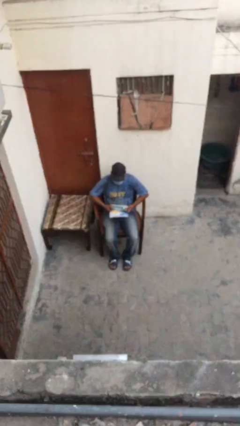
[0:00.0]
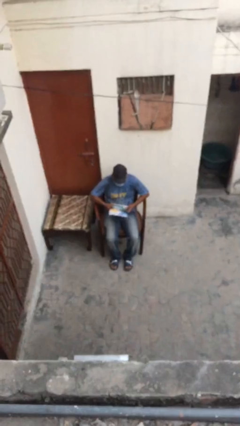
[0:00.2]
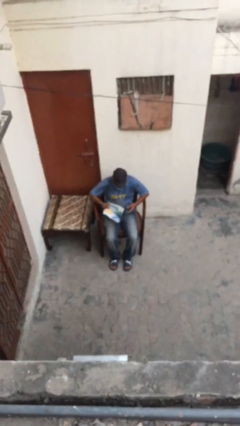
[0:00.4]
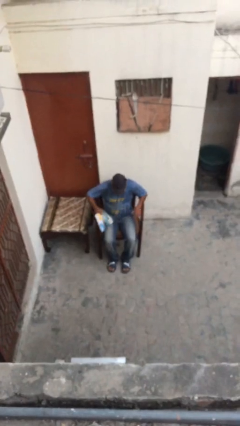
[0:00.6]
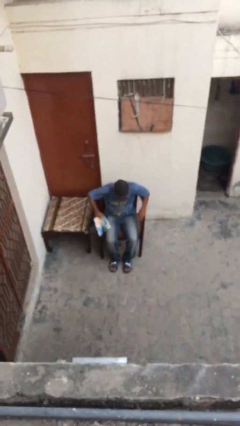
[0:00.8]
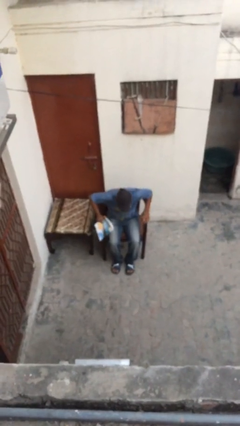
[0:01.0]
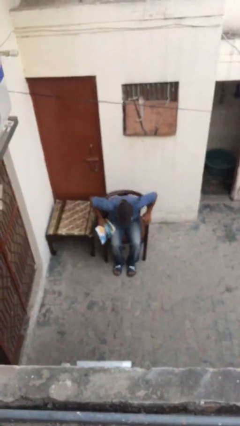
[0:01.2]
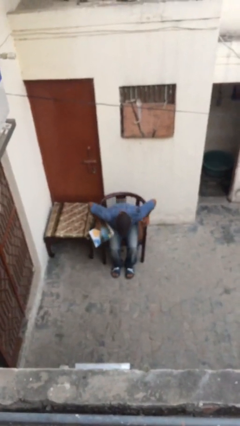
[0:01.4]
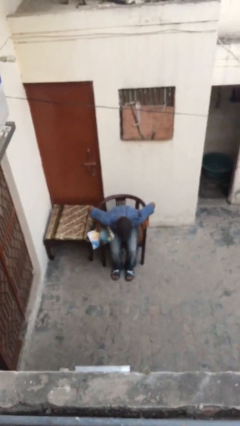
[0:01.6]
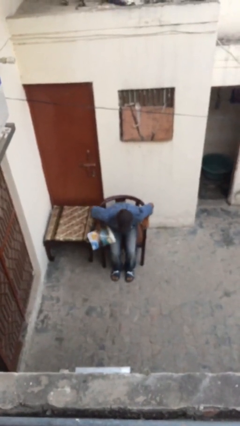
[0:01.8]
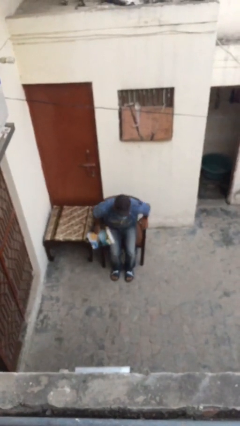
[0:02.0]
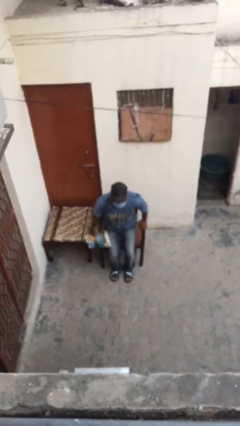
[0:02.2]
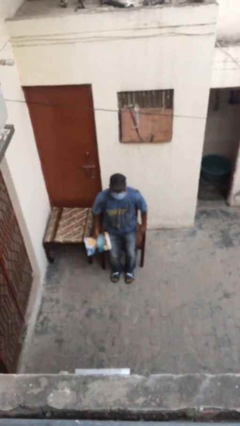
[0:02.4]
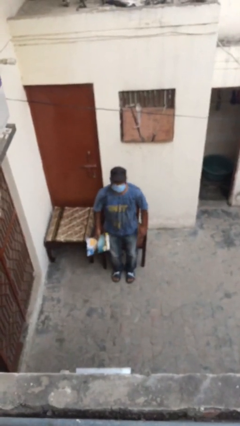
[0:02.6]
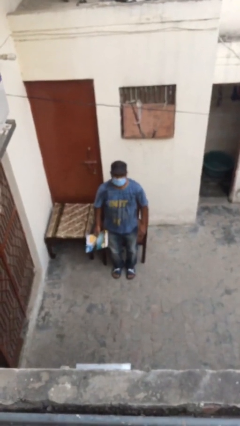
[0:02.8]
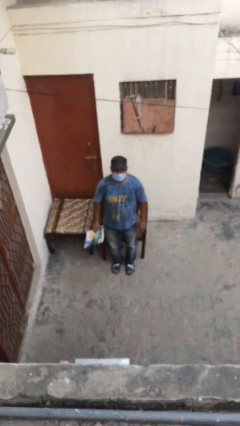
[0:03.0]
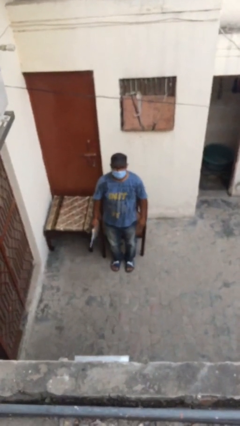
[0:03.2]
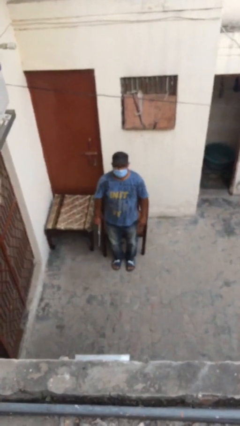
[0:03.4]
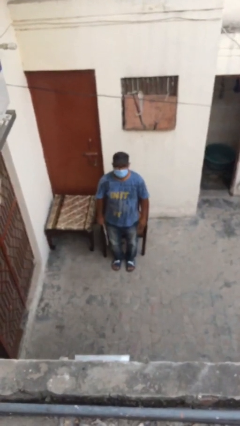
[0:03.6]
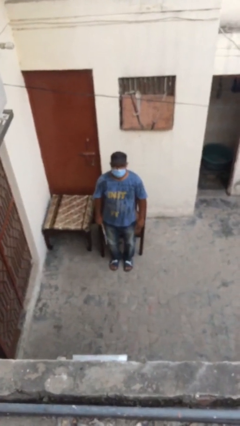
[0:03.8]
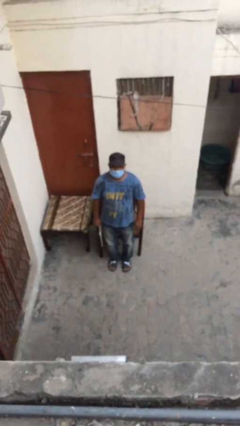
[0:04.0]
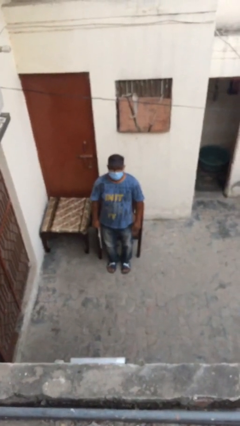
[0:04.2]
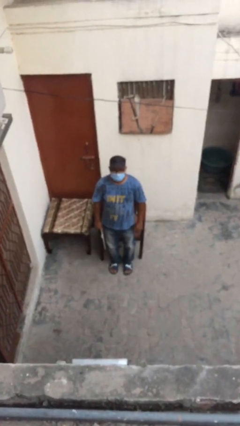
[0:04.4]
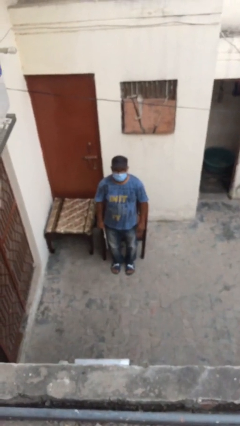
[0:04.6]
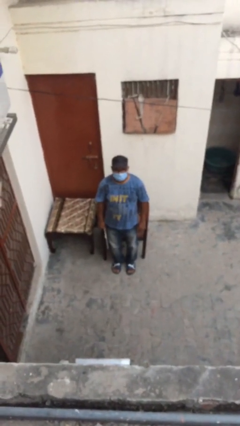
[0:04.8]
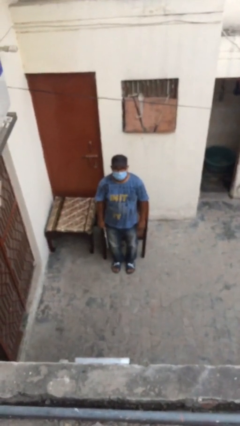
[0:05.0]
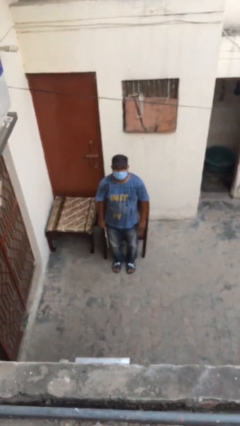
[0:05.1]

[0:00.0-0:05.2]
person stands up

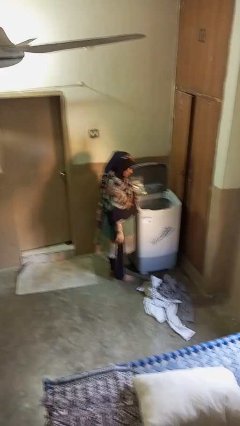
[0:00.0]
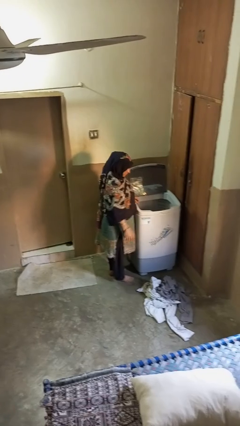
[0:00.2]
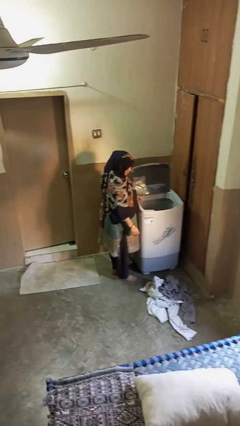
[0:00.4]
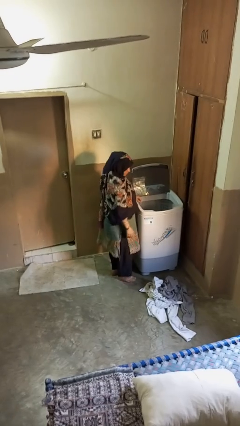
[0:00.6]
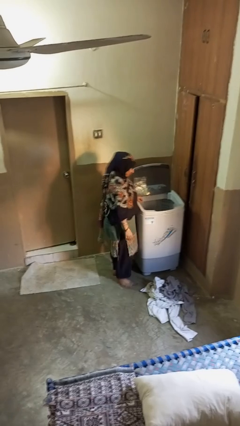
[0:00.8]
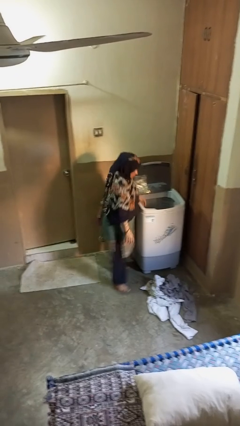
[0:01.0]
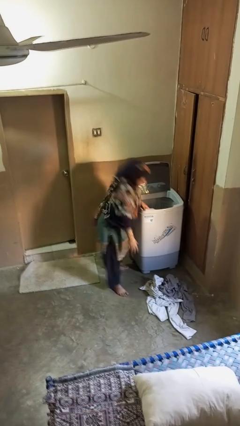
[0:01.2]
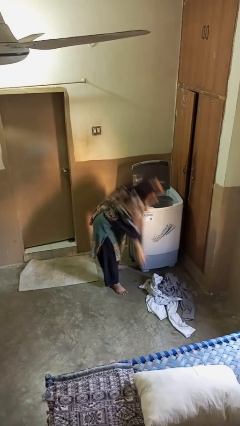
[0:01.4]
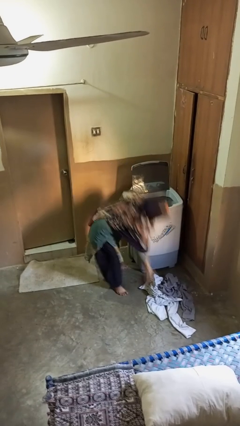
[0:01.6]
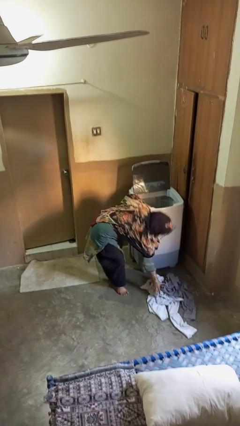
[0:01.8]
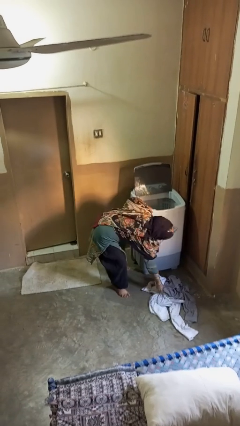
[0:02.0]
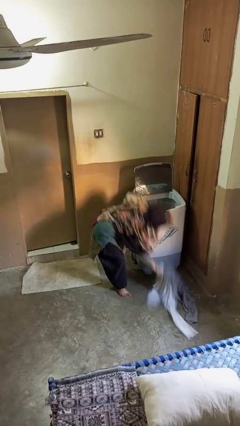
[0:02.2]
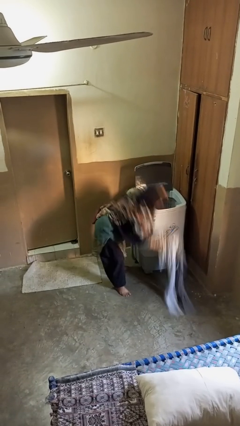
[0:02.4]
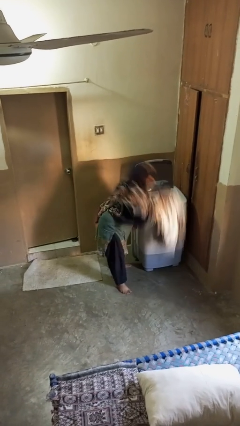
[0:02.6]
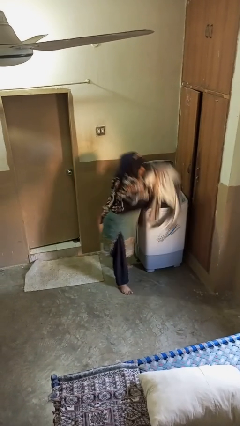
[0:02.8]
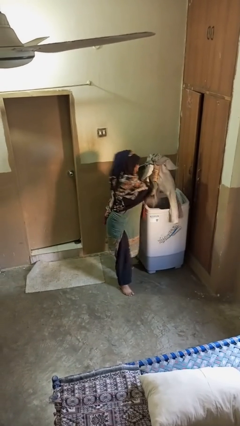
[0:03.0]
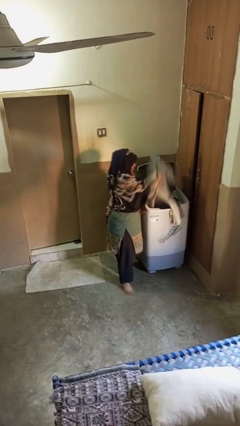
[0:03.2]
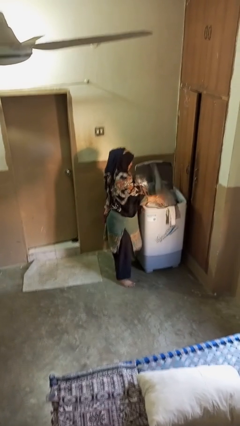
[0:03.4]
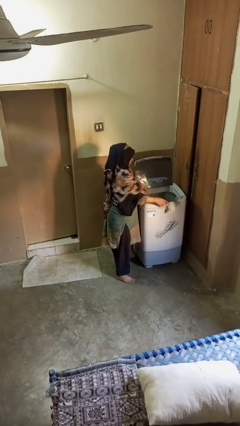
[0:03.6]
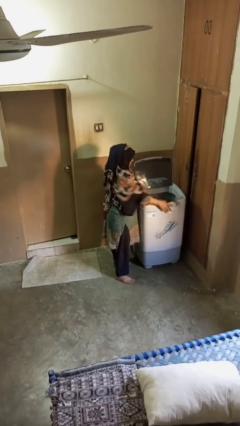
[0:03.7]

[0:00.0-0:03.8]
person loads clotheswasher

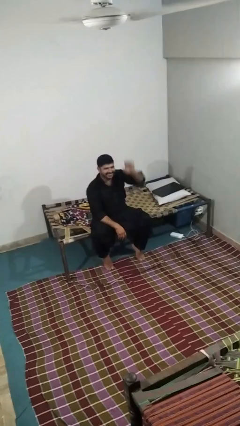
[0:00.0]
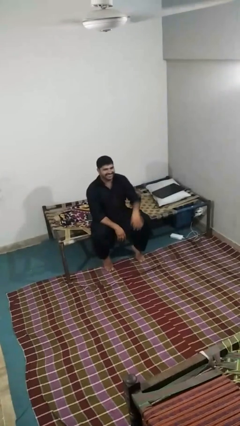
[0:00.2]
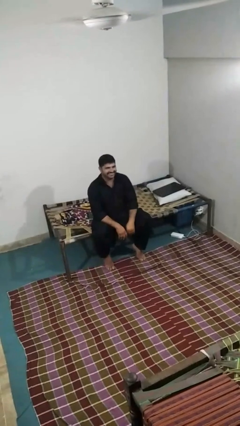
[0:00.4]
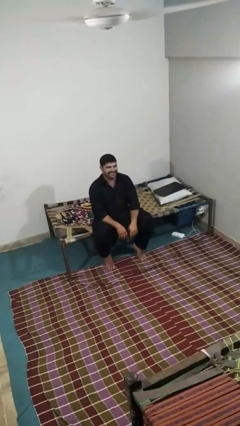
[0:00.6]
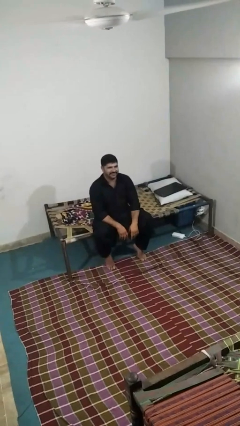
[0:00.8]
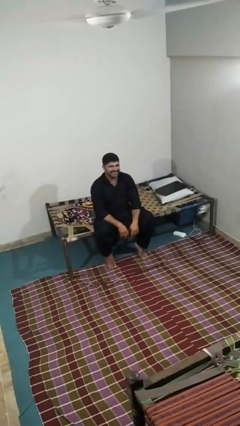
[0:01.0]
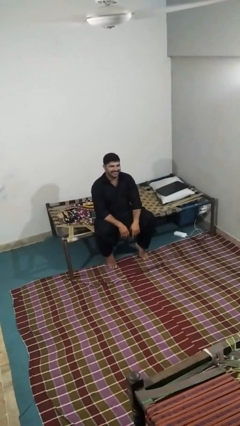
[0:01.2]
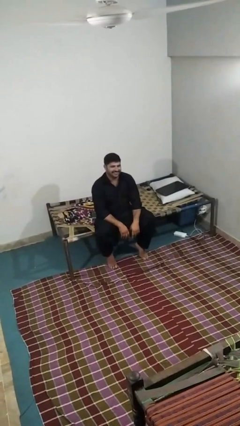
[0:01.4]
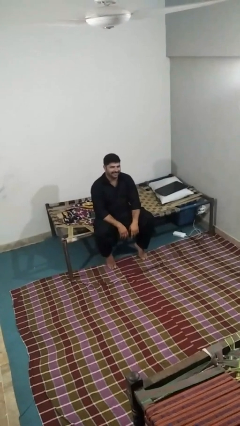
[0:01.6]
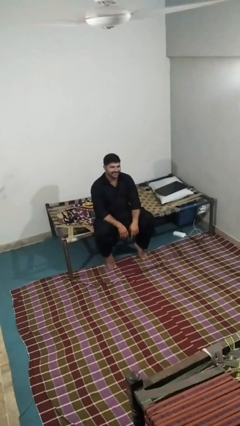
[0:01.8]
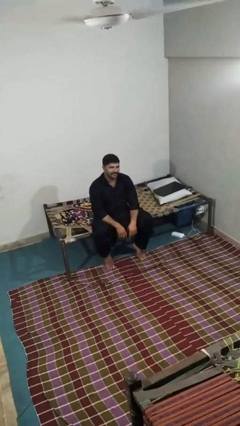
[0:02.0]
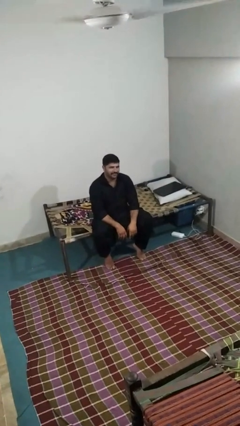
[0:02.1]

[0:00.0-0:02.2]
person gestures lower hand

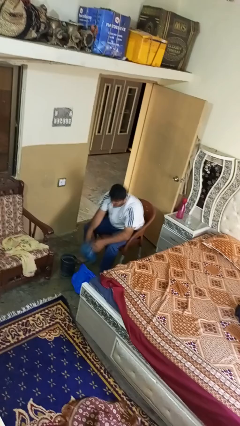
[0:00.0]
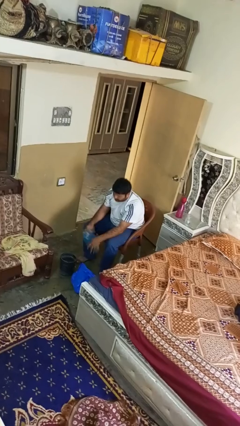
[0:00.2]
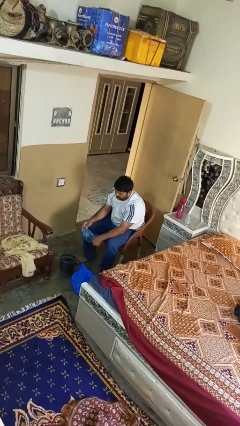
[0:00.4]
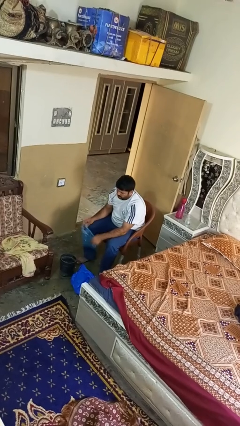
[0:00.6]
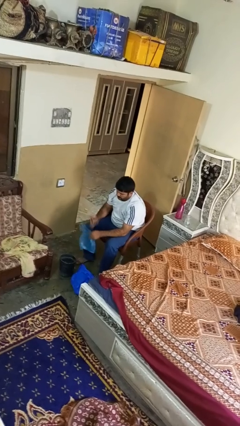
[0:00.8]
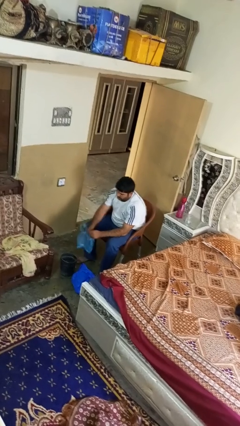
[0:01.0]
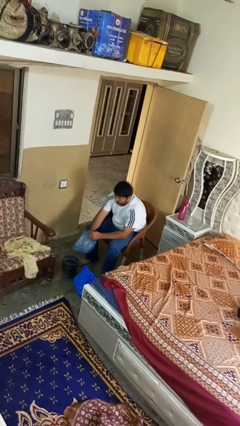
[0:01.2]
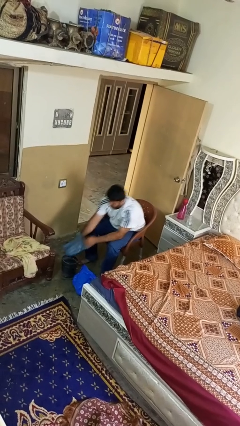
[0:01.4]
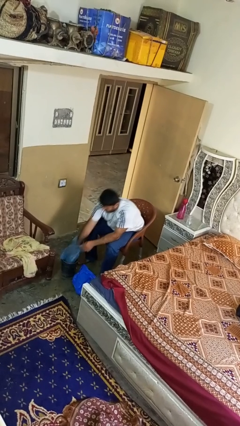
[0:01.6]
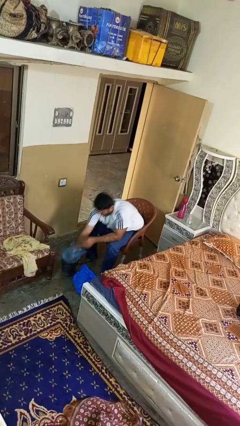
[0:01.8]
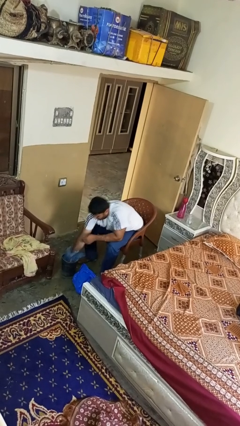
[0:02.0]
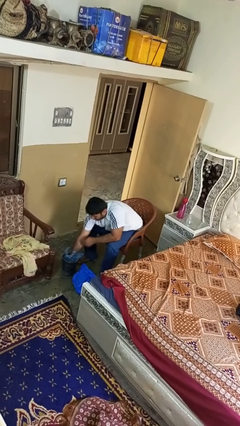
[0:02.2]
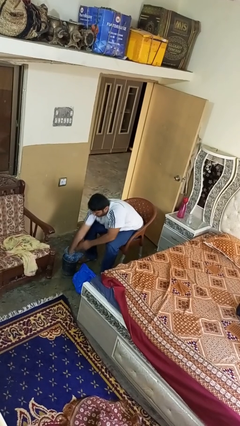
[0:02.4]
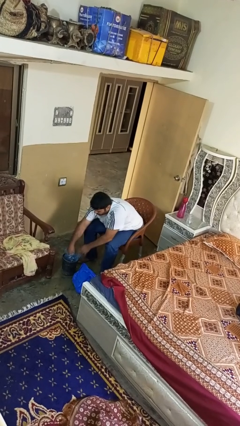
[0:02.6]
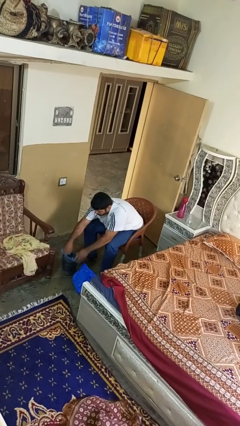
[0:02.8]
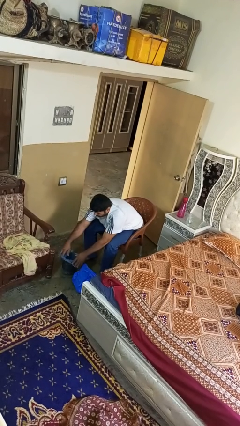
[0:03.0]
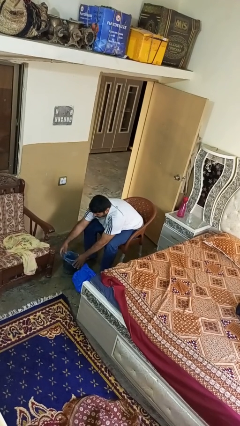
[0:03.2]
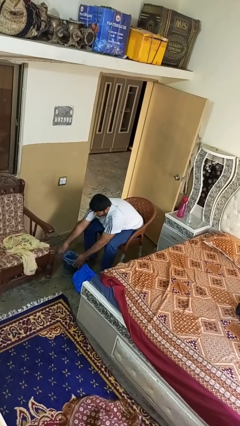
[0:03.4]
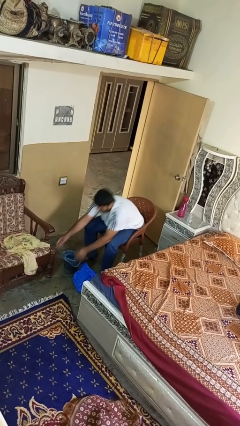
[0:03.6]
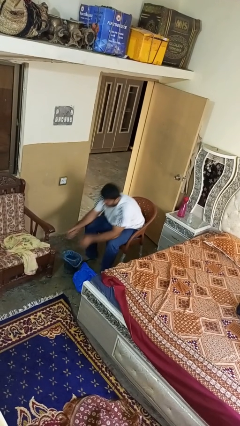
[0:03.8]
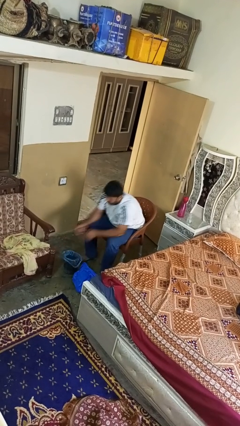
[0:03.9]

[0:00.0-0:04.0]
person inserts trashbag into trashcan

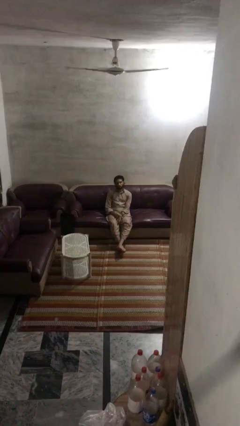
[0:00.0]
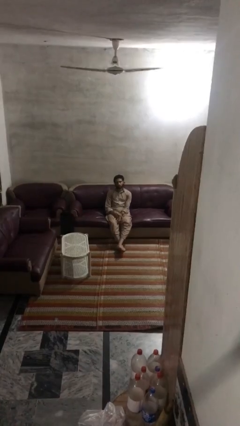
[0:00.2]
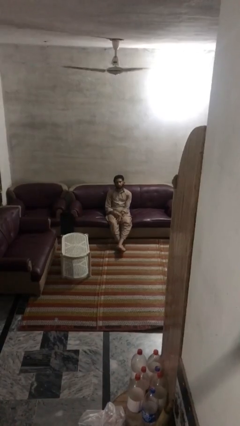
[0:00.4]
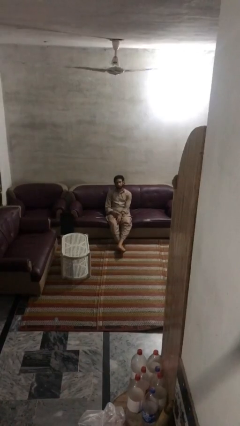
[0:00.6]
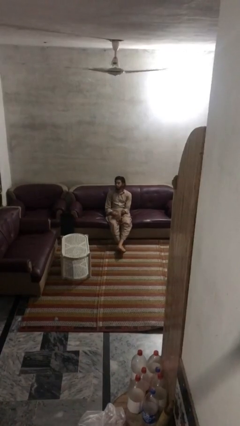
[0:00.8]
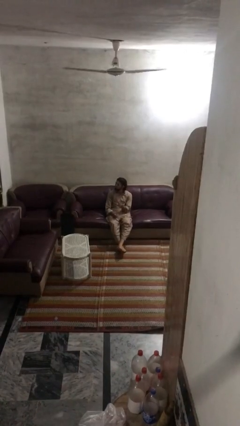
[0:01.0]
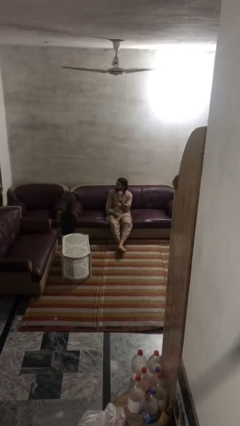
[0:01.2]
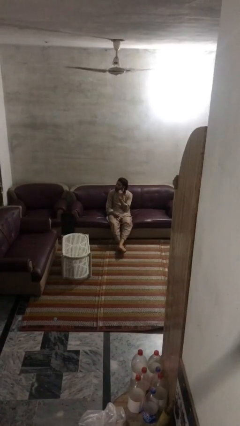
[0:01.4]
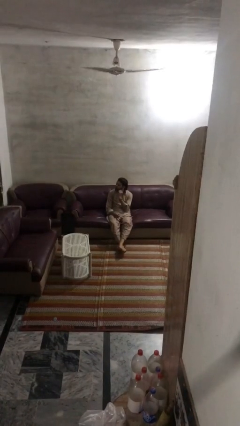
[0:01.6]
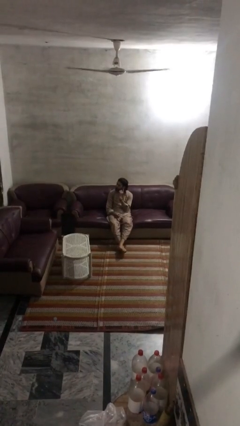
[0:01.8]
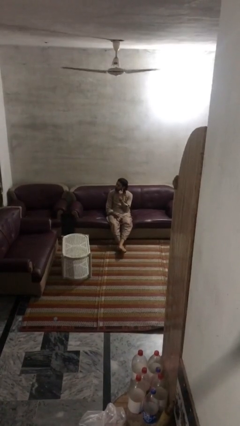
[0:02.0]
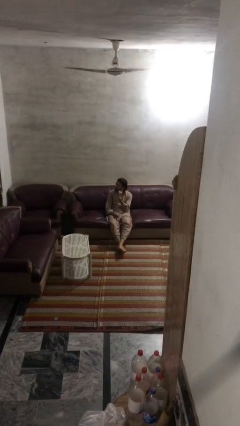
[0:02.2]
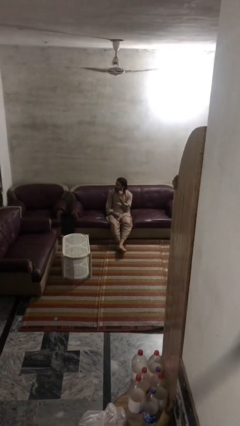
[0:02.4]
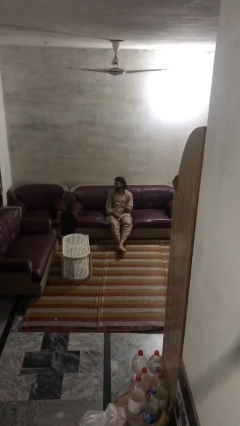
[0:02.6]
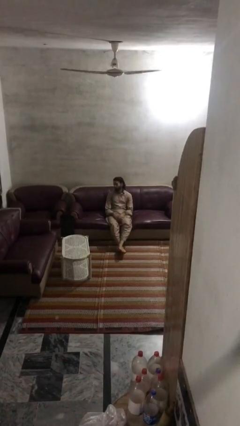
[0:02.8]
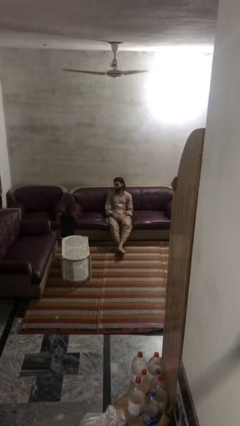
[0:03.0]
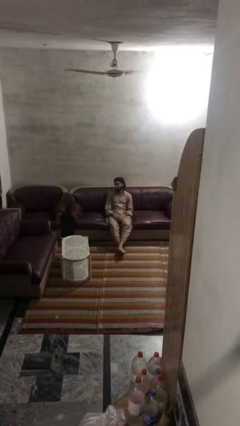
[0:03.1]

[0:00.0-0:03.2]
person gestures listen closely
